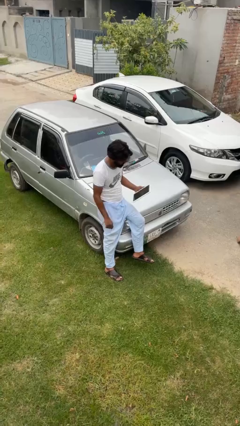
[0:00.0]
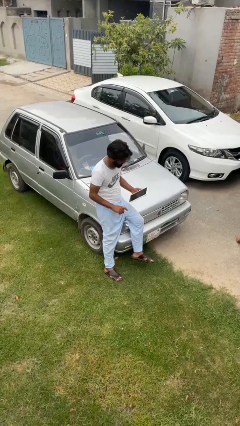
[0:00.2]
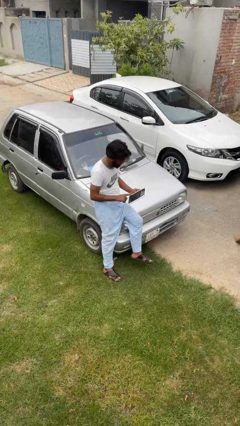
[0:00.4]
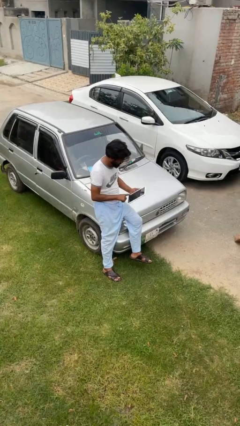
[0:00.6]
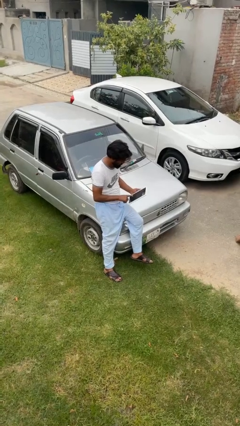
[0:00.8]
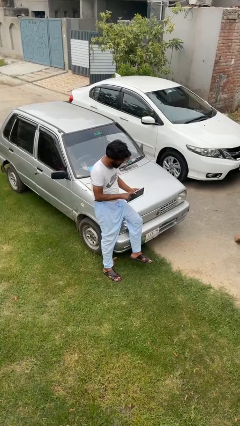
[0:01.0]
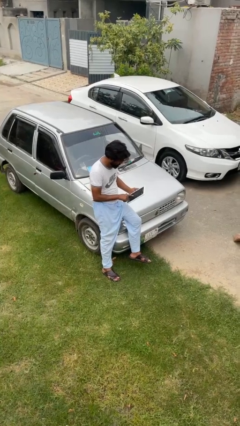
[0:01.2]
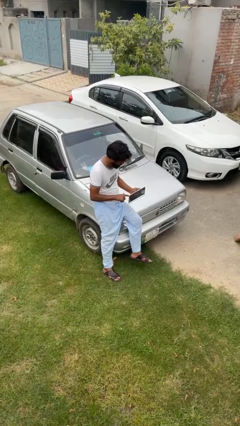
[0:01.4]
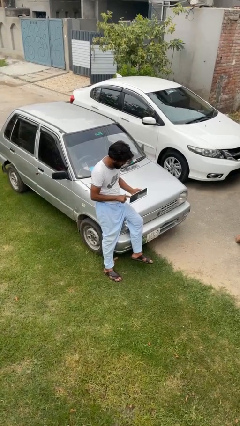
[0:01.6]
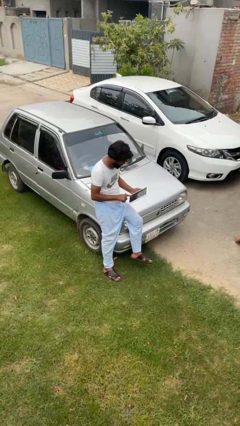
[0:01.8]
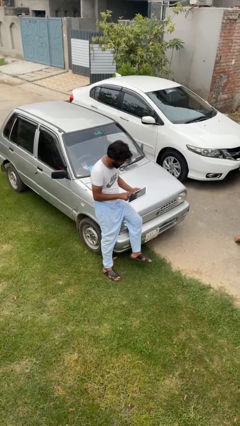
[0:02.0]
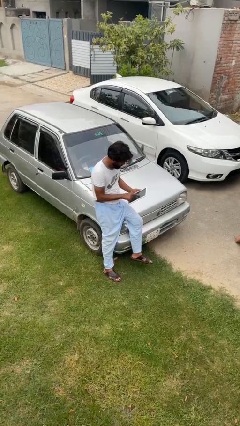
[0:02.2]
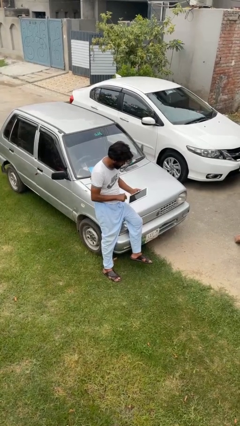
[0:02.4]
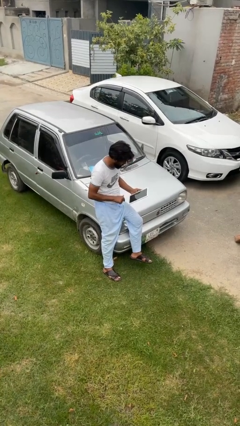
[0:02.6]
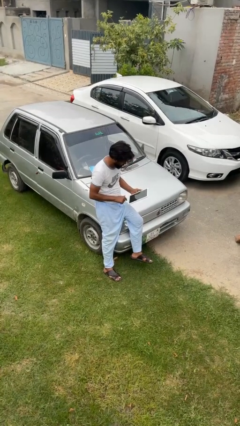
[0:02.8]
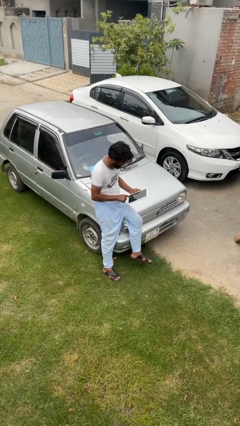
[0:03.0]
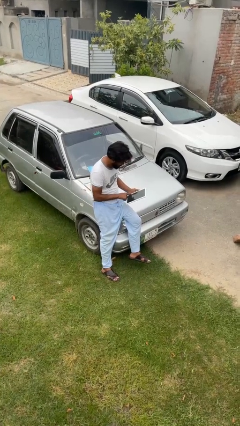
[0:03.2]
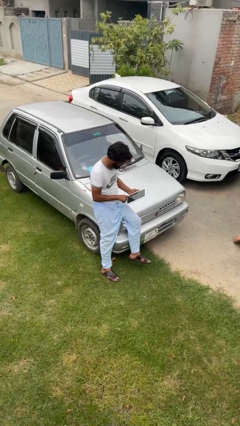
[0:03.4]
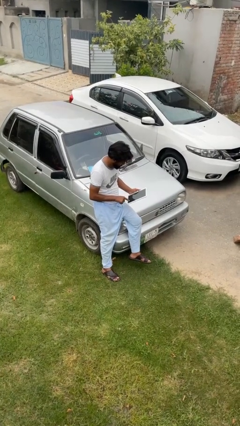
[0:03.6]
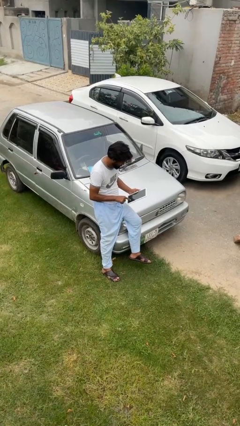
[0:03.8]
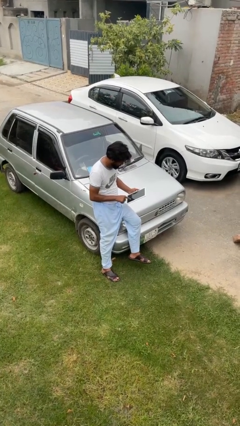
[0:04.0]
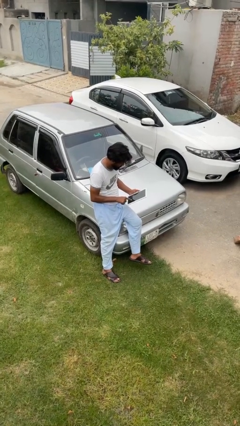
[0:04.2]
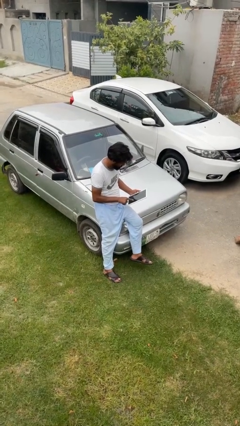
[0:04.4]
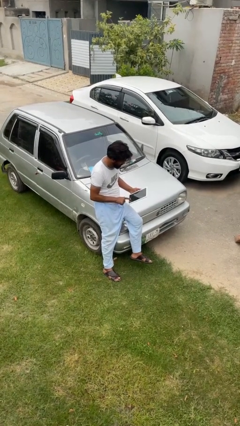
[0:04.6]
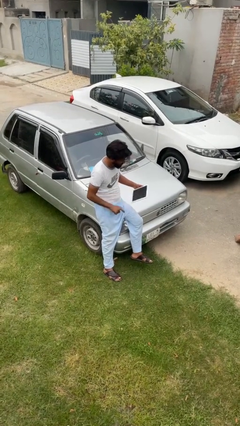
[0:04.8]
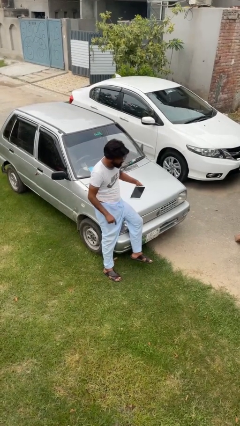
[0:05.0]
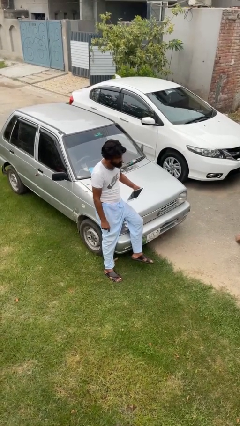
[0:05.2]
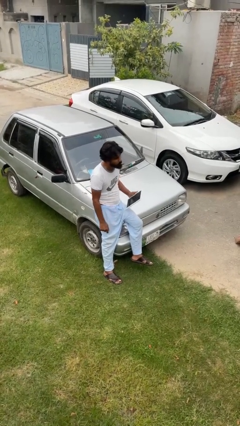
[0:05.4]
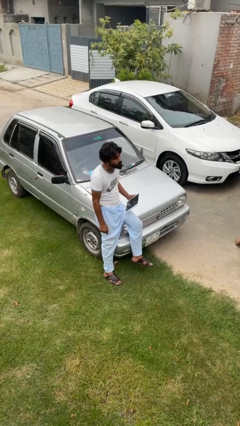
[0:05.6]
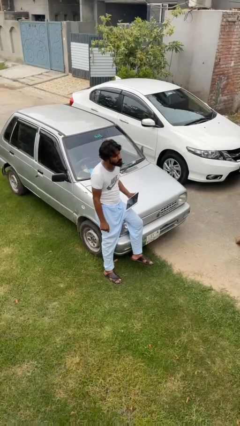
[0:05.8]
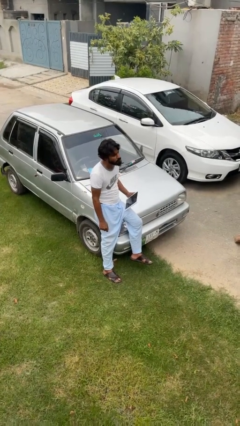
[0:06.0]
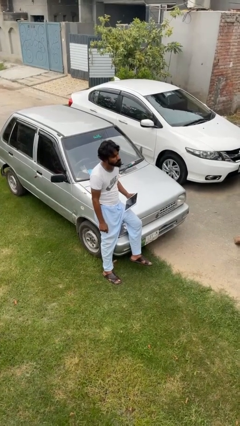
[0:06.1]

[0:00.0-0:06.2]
person interacts with tablet

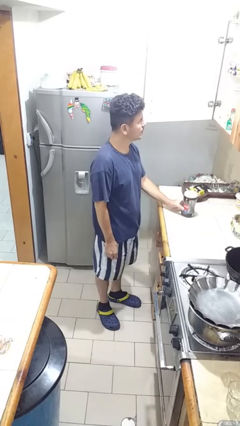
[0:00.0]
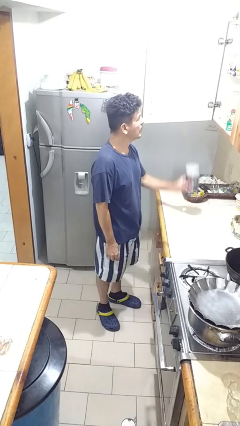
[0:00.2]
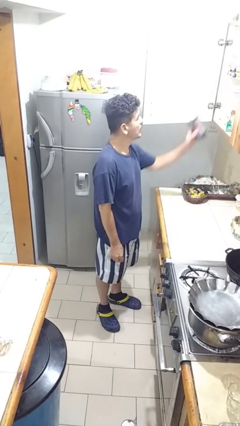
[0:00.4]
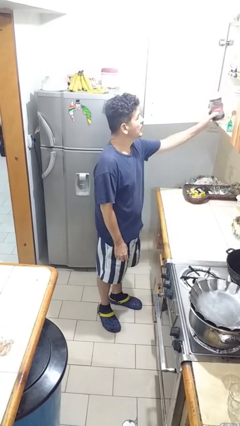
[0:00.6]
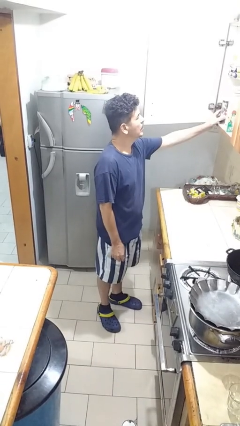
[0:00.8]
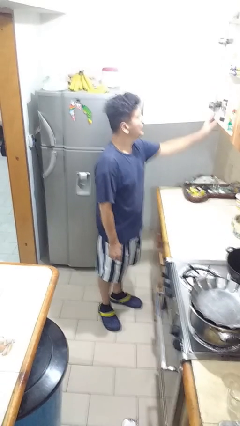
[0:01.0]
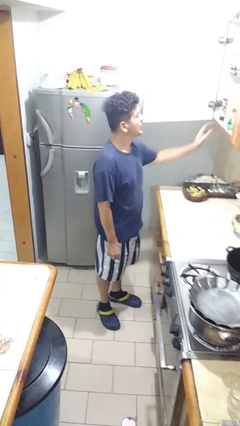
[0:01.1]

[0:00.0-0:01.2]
person puts object in cabinet

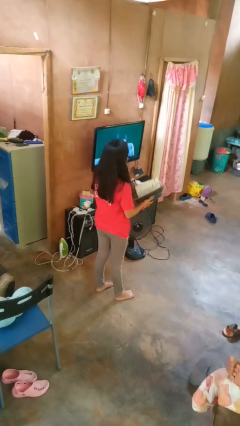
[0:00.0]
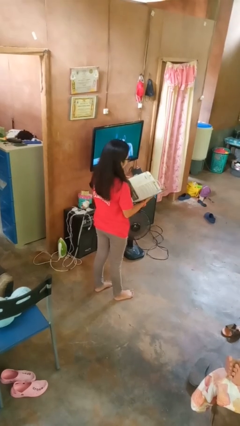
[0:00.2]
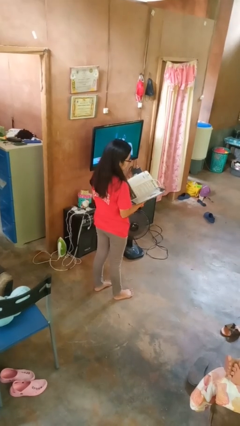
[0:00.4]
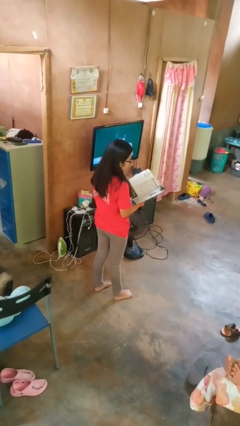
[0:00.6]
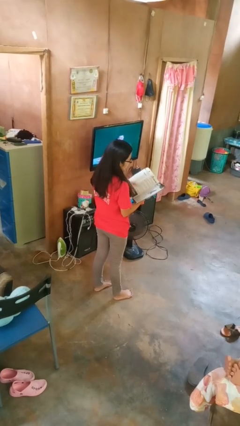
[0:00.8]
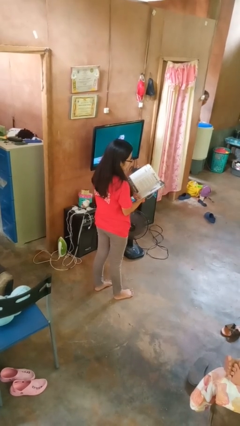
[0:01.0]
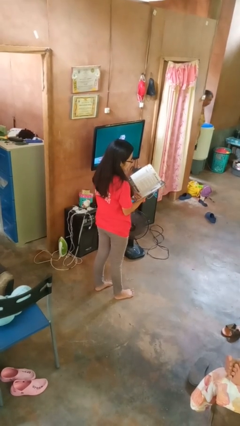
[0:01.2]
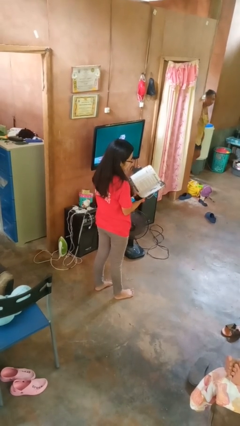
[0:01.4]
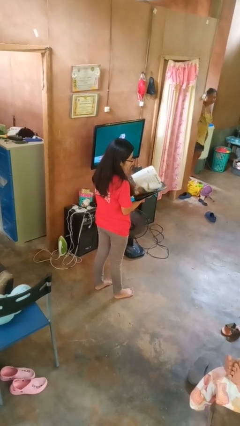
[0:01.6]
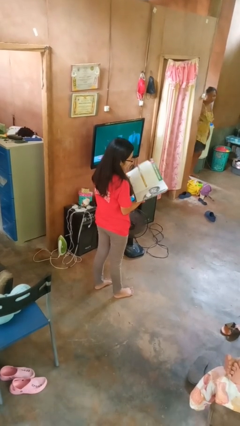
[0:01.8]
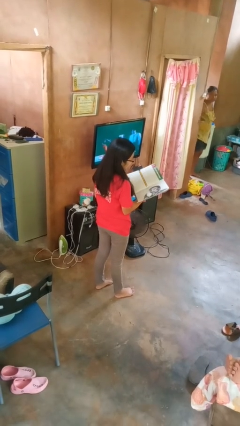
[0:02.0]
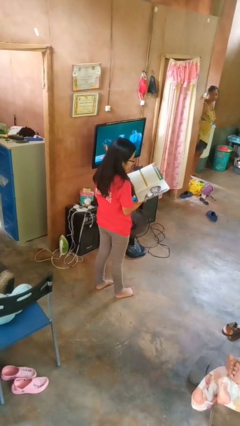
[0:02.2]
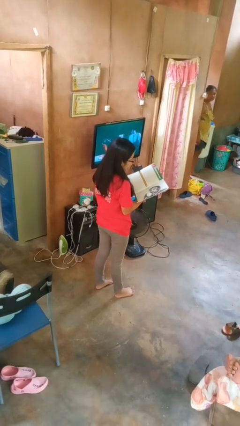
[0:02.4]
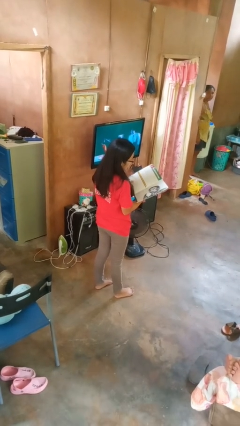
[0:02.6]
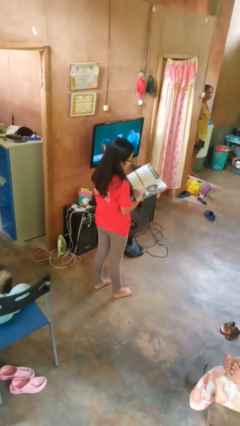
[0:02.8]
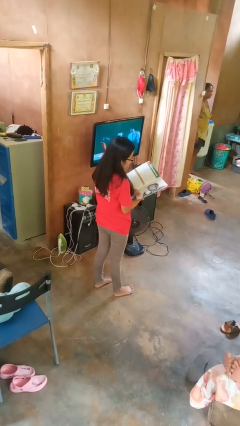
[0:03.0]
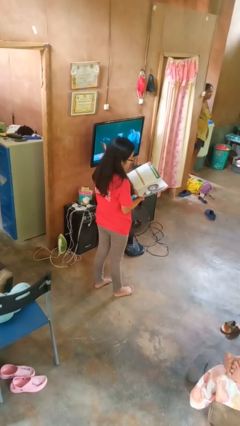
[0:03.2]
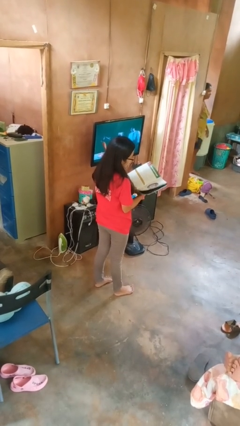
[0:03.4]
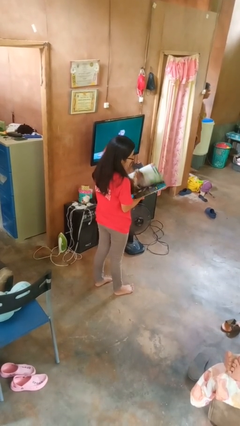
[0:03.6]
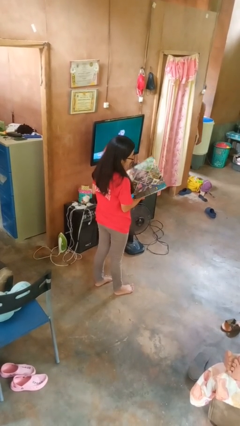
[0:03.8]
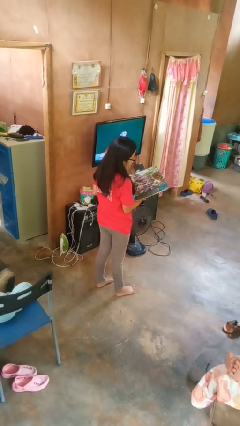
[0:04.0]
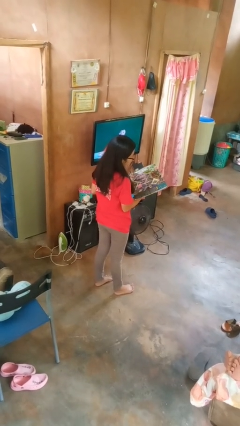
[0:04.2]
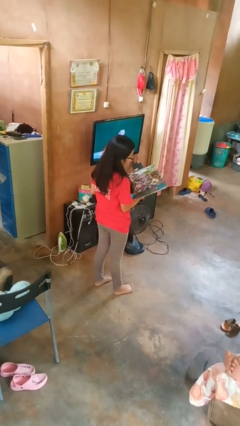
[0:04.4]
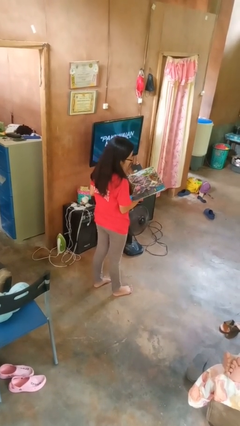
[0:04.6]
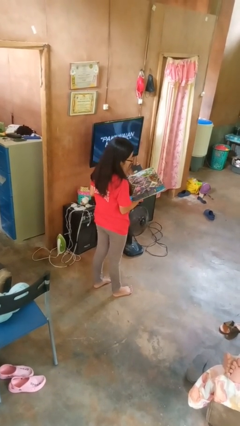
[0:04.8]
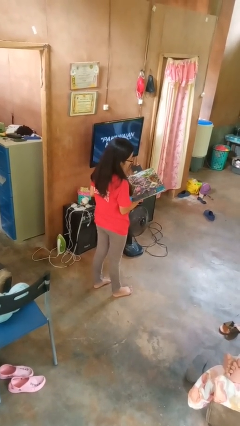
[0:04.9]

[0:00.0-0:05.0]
person reads magazine

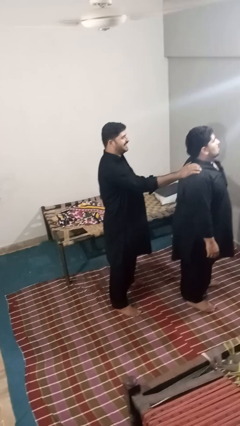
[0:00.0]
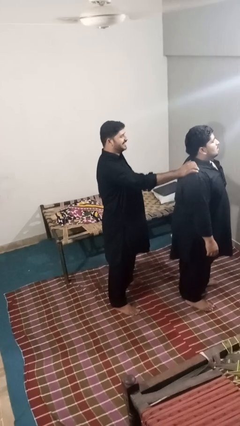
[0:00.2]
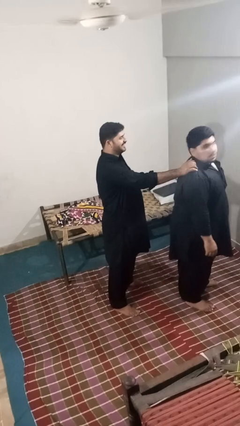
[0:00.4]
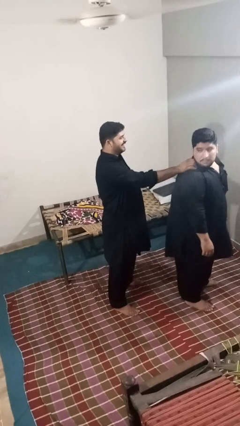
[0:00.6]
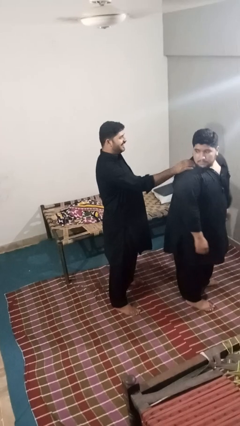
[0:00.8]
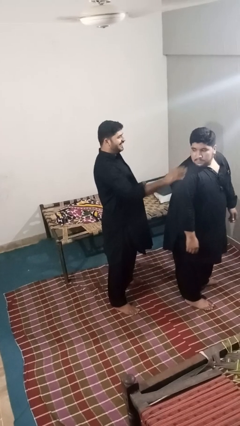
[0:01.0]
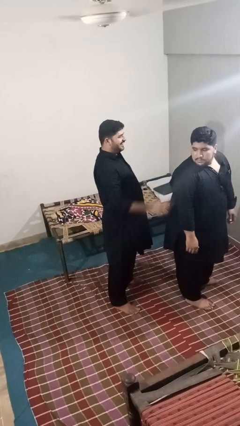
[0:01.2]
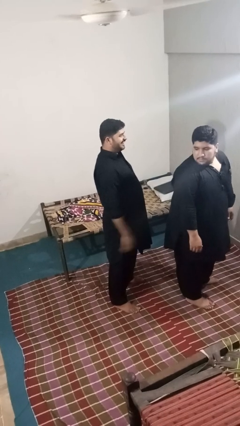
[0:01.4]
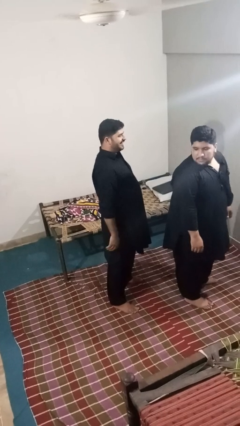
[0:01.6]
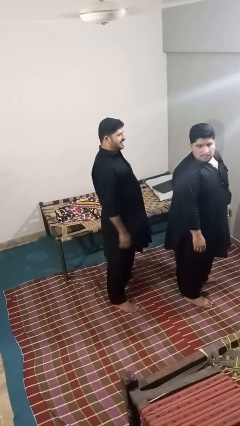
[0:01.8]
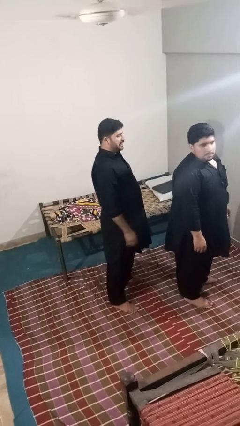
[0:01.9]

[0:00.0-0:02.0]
person touches back of person

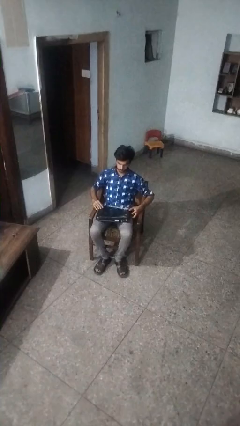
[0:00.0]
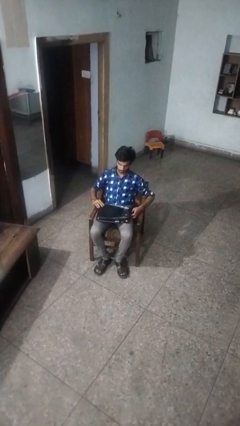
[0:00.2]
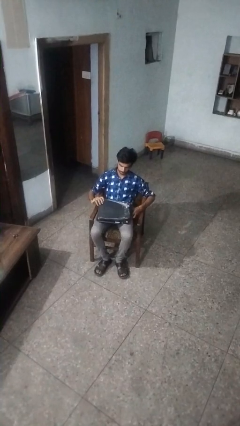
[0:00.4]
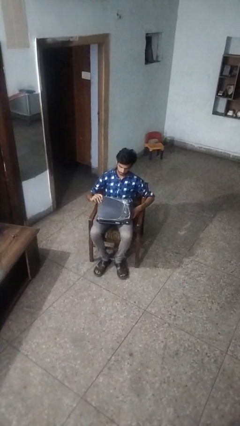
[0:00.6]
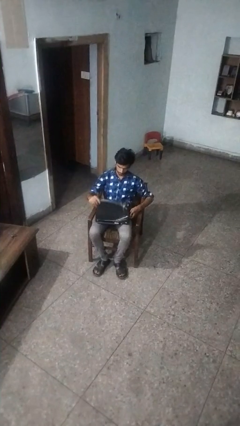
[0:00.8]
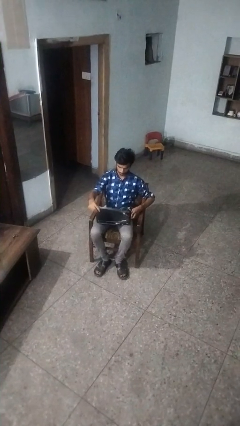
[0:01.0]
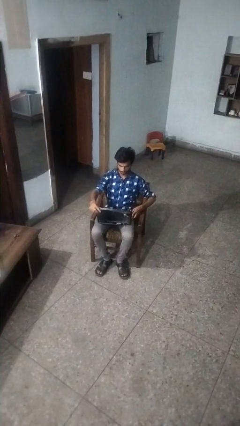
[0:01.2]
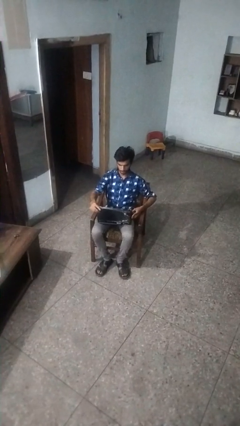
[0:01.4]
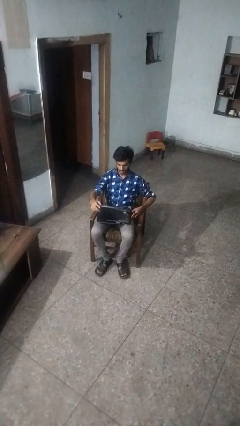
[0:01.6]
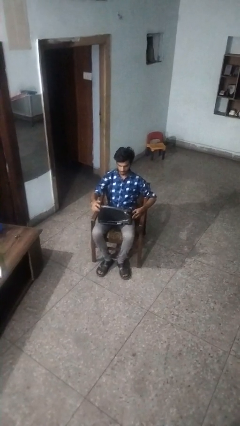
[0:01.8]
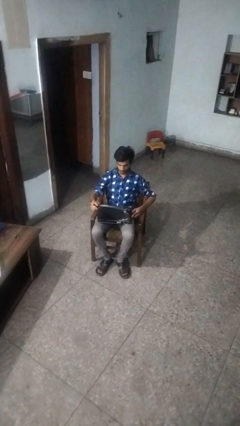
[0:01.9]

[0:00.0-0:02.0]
person opens laptop

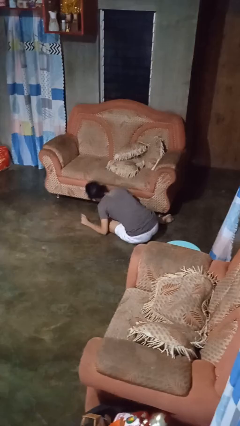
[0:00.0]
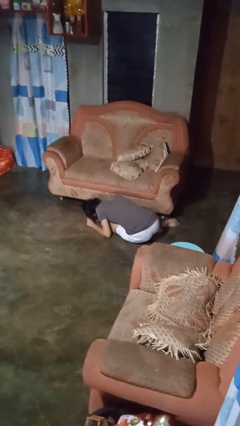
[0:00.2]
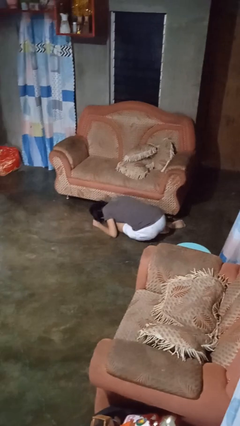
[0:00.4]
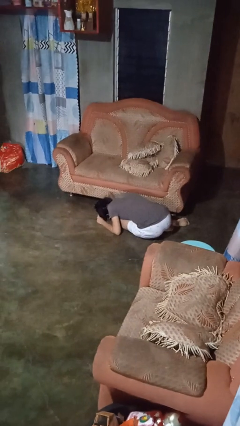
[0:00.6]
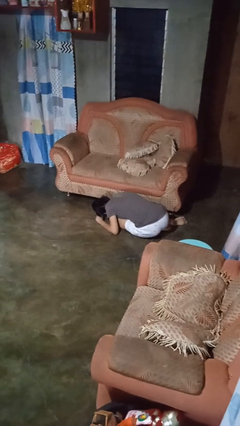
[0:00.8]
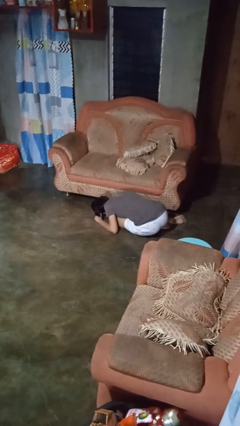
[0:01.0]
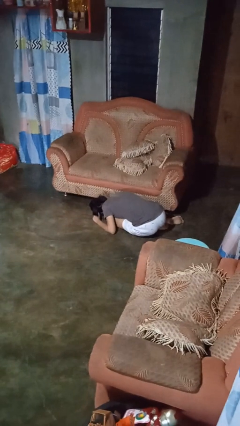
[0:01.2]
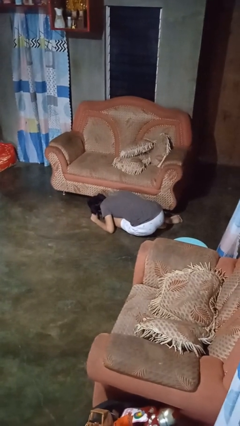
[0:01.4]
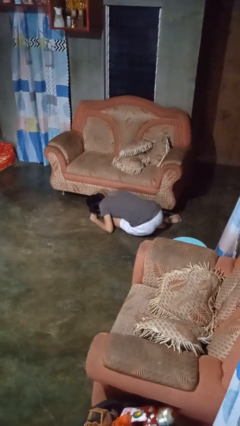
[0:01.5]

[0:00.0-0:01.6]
person searches under couch
